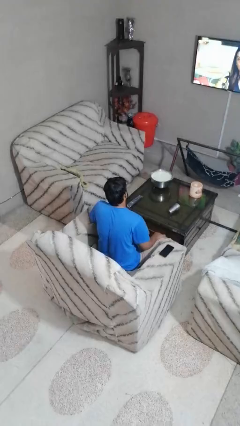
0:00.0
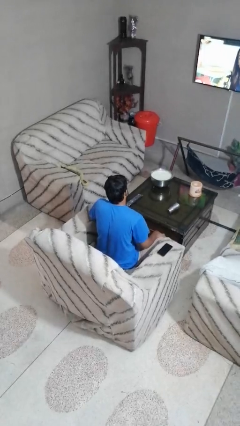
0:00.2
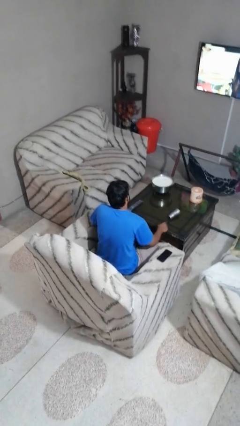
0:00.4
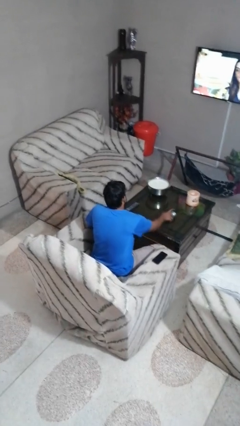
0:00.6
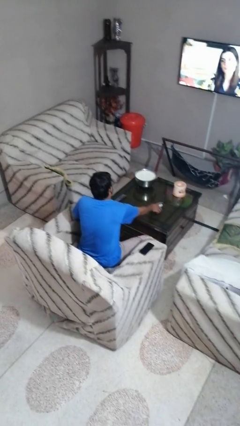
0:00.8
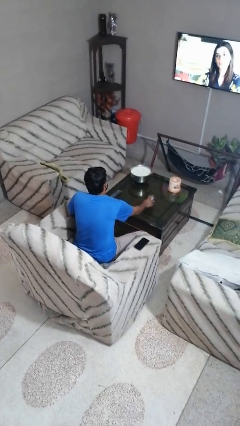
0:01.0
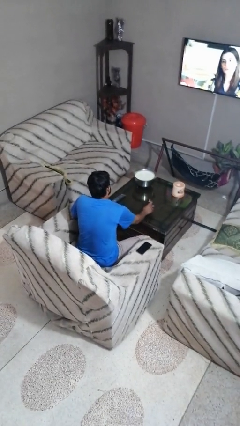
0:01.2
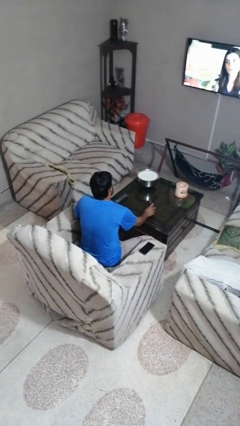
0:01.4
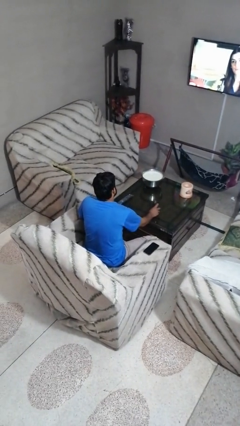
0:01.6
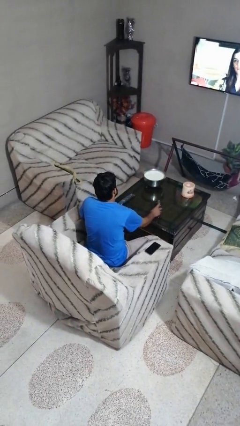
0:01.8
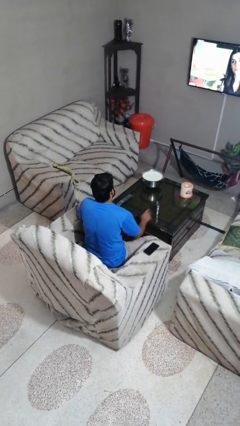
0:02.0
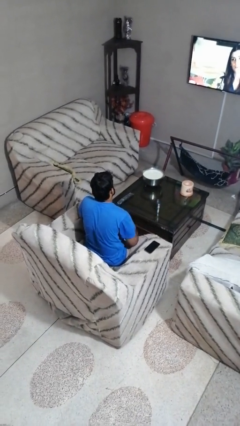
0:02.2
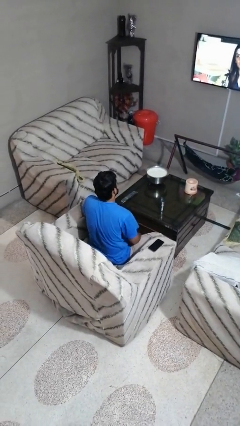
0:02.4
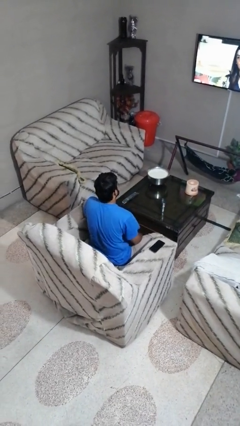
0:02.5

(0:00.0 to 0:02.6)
person sets upright glass

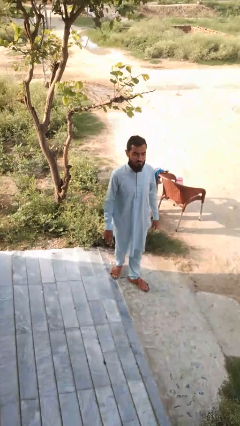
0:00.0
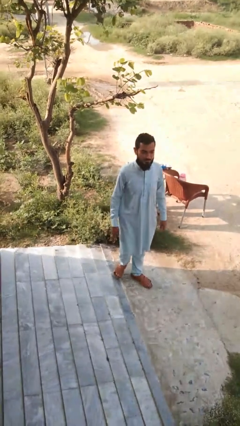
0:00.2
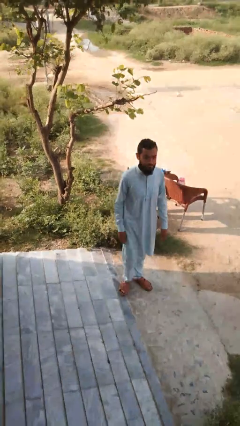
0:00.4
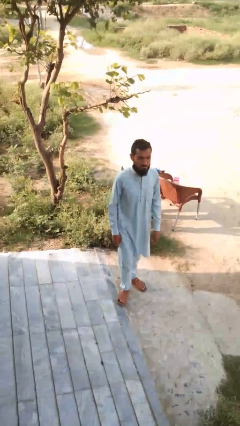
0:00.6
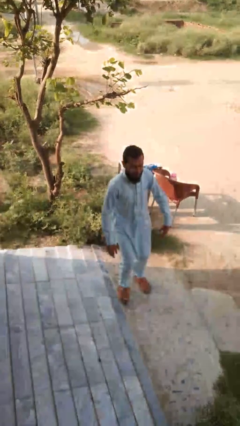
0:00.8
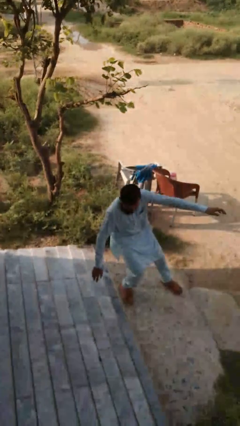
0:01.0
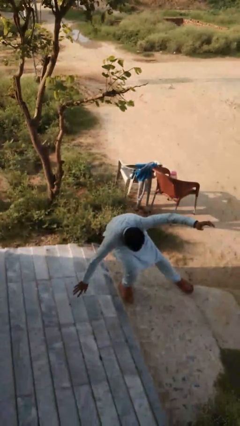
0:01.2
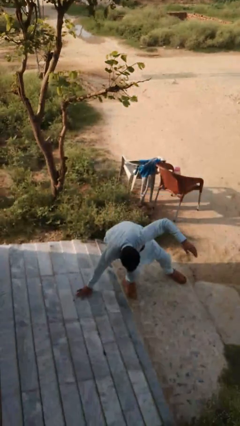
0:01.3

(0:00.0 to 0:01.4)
person trips on object on floor

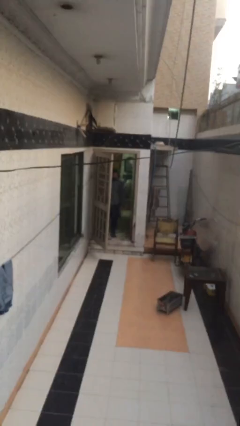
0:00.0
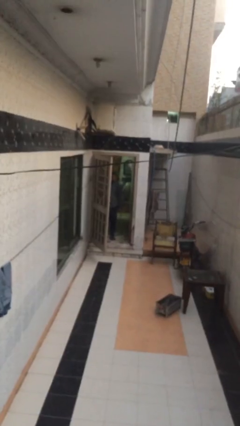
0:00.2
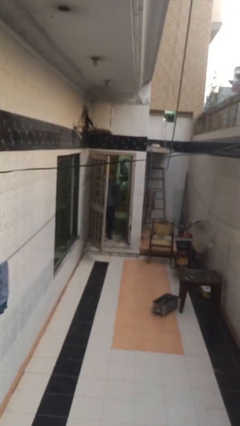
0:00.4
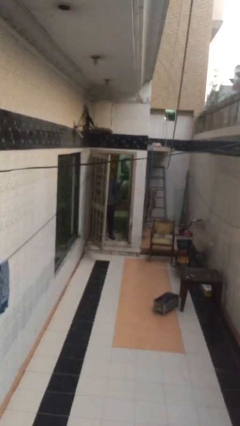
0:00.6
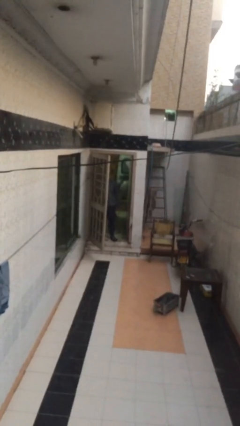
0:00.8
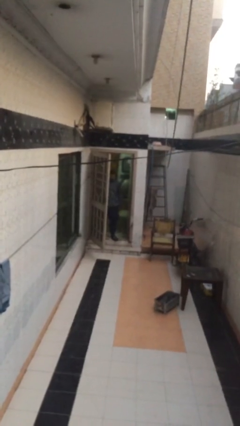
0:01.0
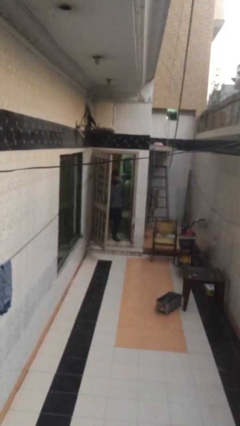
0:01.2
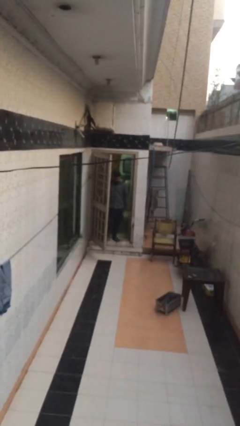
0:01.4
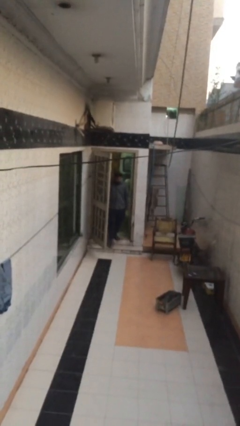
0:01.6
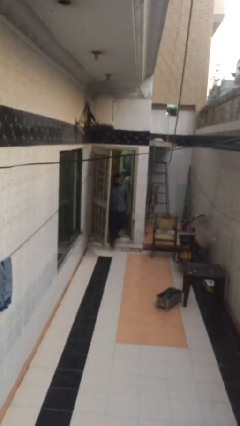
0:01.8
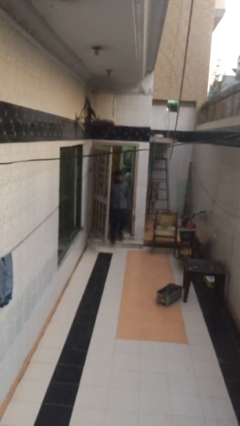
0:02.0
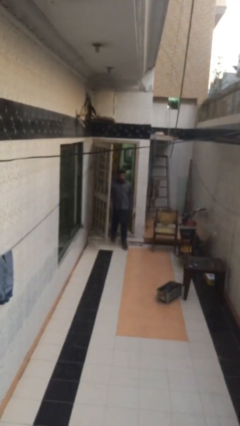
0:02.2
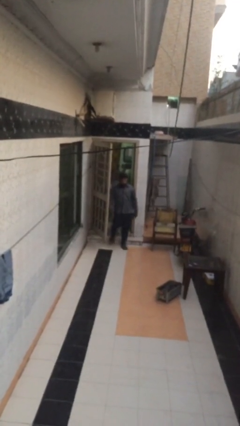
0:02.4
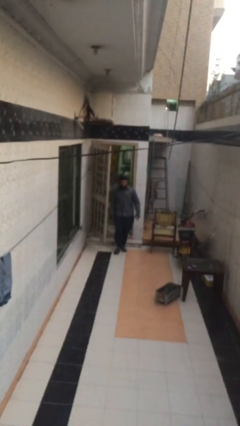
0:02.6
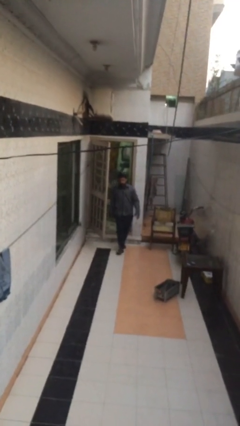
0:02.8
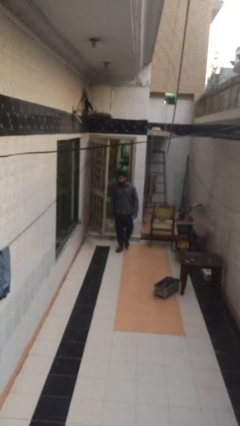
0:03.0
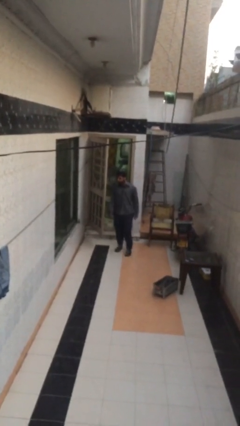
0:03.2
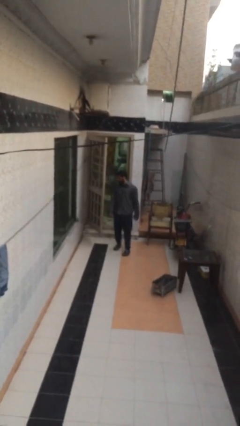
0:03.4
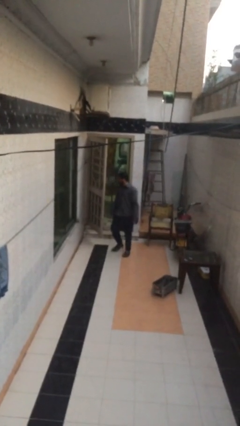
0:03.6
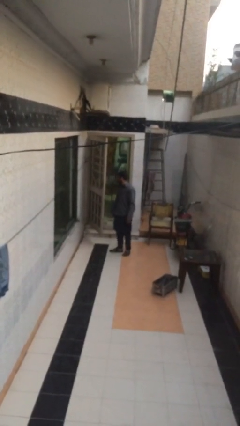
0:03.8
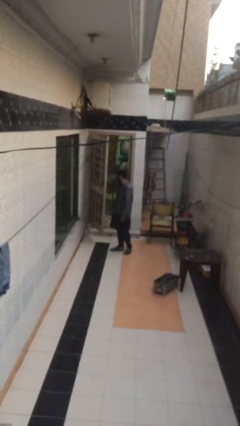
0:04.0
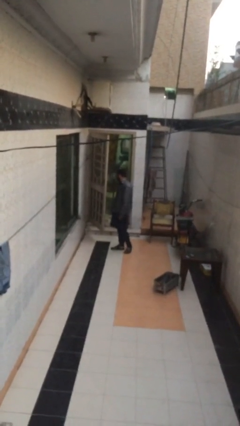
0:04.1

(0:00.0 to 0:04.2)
person enters scene through structure

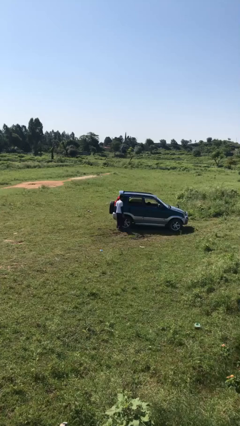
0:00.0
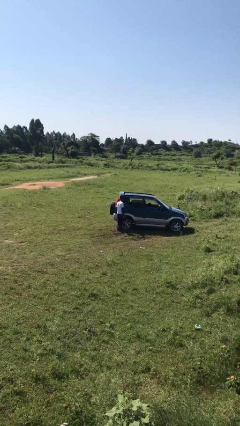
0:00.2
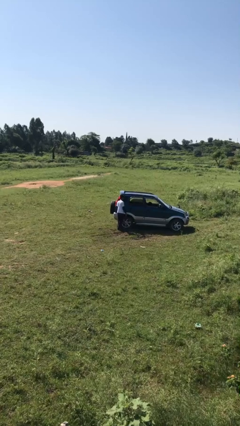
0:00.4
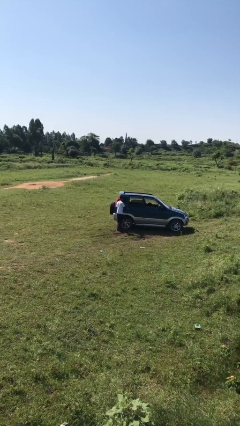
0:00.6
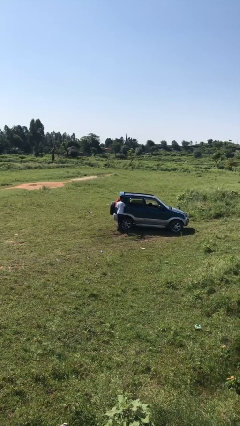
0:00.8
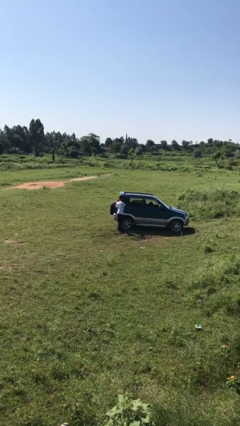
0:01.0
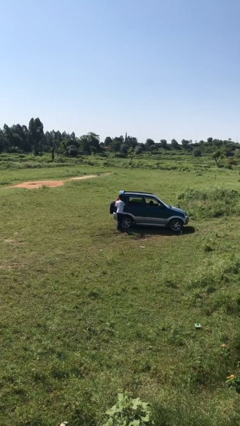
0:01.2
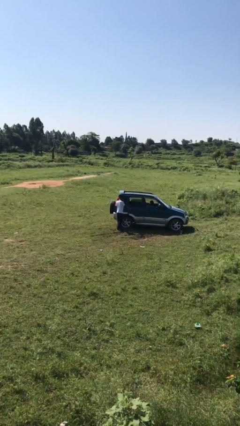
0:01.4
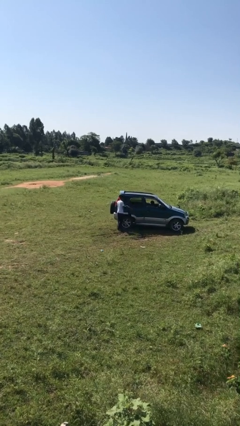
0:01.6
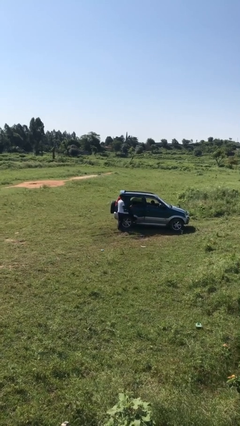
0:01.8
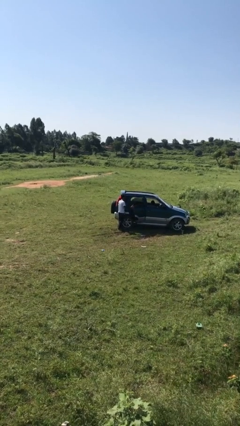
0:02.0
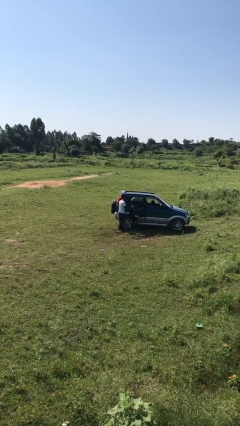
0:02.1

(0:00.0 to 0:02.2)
person opens car door

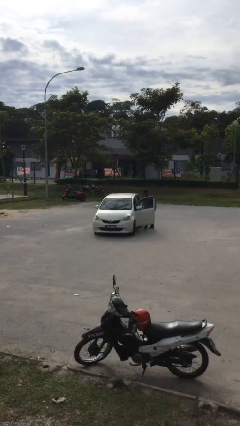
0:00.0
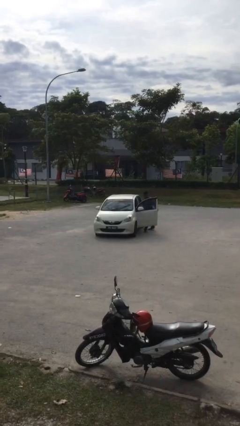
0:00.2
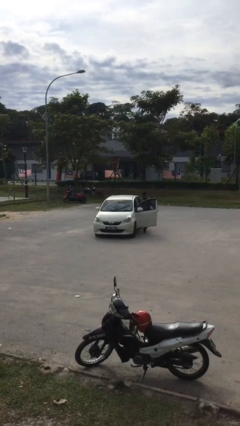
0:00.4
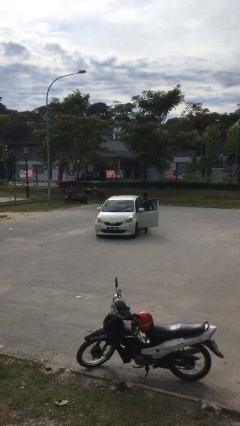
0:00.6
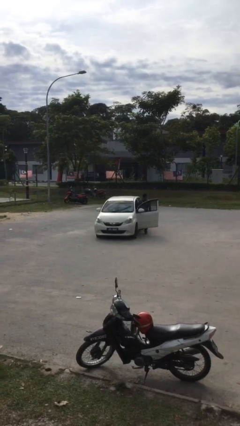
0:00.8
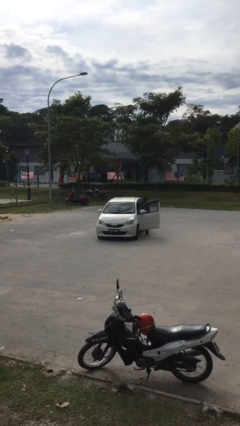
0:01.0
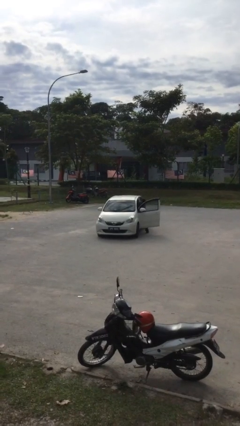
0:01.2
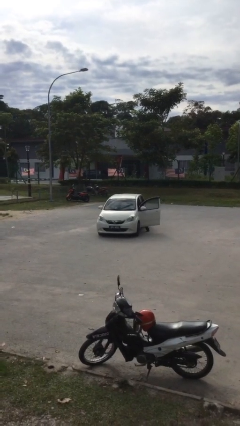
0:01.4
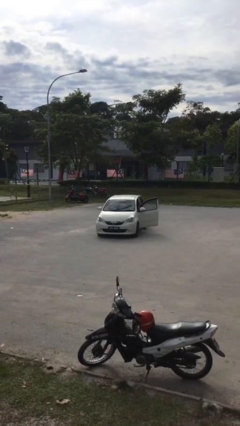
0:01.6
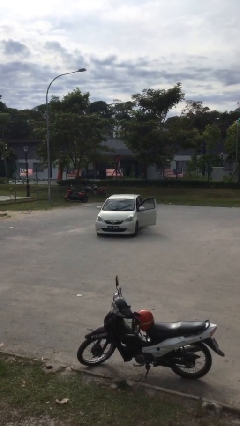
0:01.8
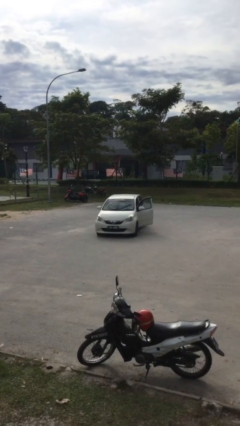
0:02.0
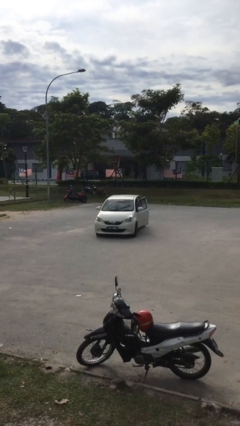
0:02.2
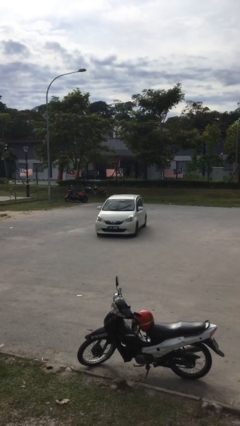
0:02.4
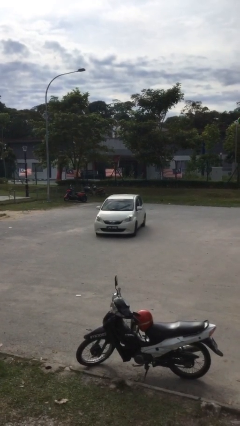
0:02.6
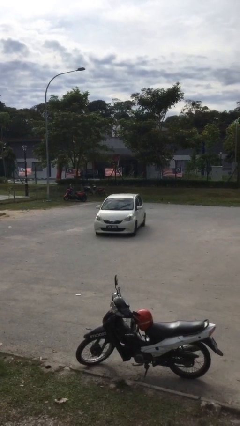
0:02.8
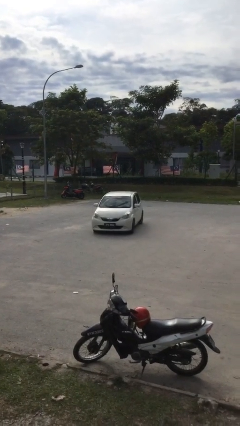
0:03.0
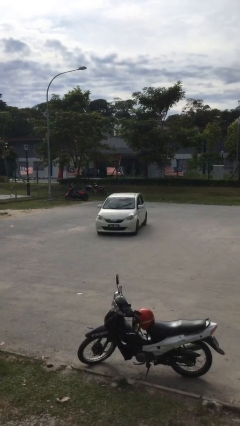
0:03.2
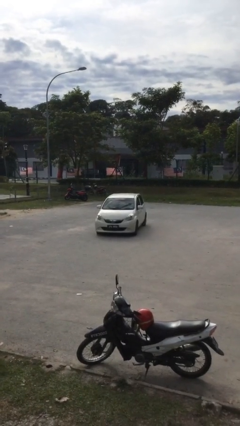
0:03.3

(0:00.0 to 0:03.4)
car picks up person

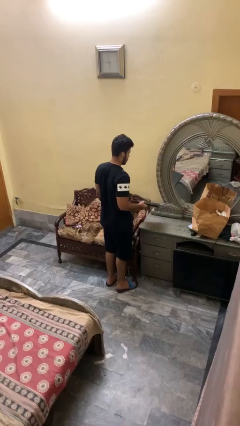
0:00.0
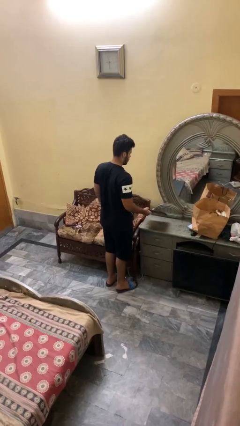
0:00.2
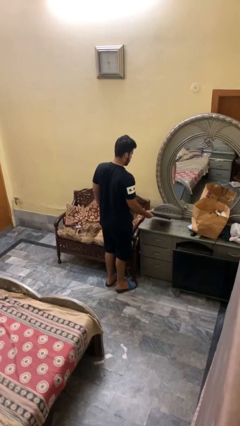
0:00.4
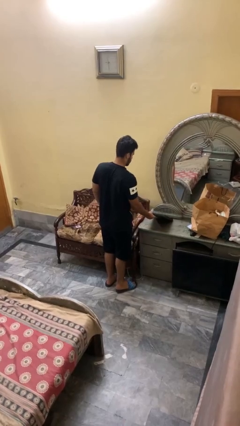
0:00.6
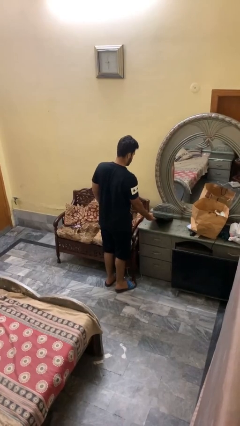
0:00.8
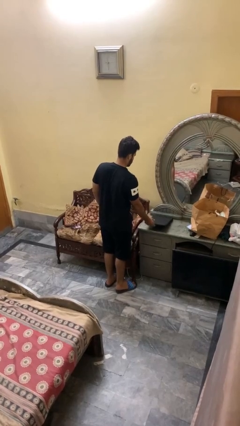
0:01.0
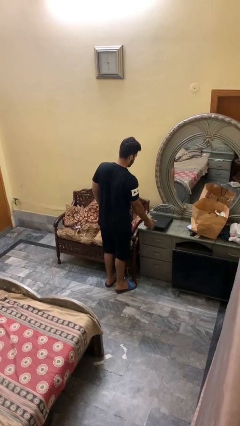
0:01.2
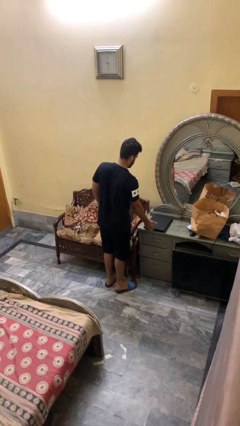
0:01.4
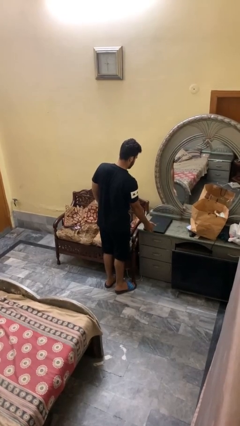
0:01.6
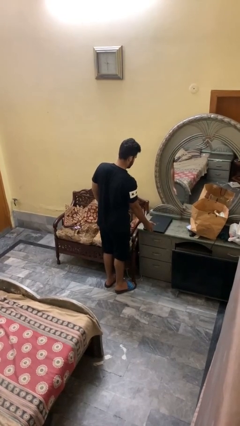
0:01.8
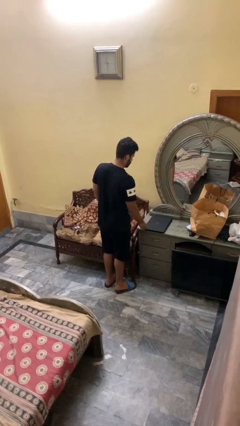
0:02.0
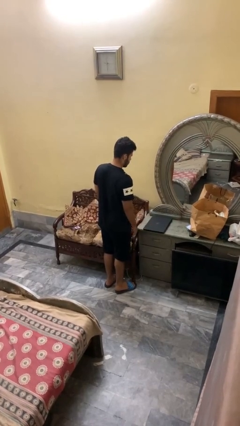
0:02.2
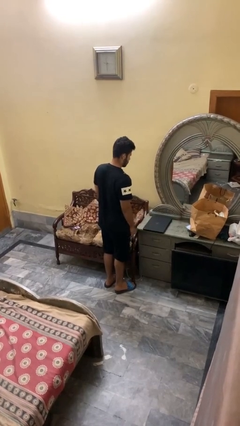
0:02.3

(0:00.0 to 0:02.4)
person puts down object on countertop

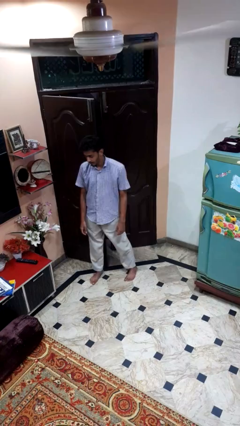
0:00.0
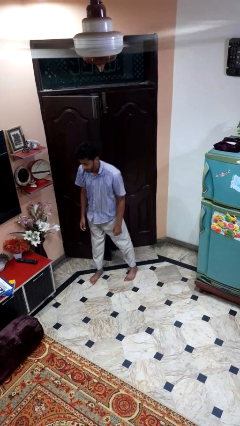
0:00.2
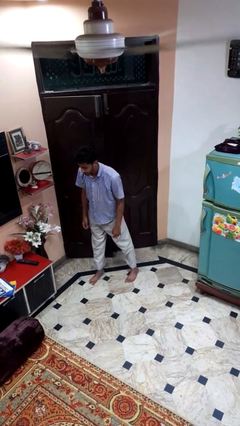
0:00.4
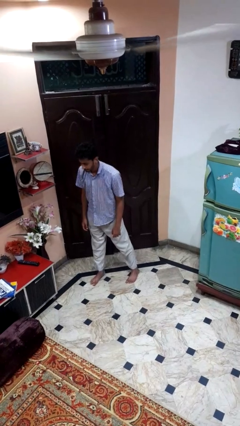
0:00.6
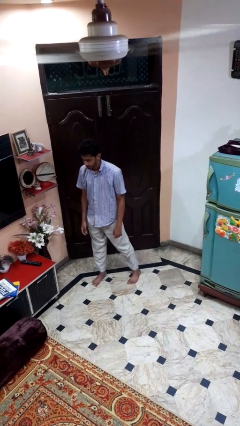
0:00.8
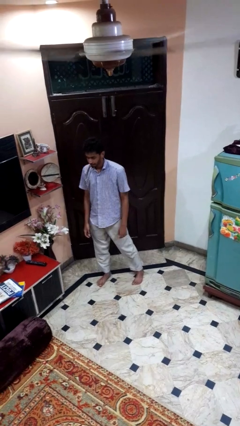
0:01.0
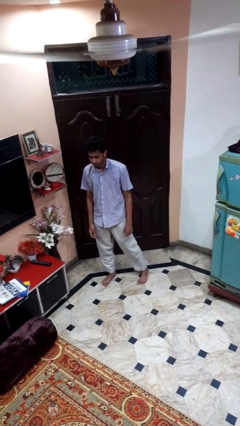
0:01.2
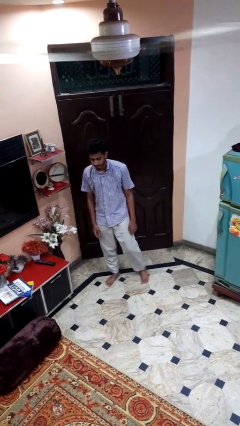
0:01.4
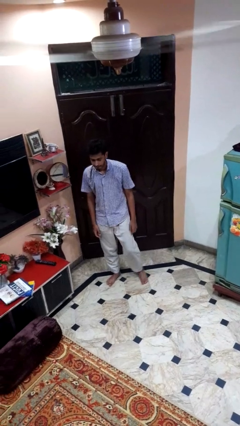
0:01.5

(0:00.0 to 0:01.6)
person closes door with hip
